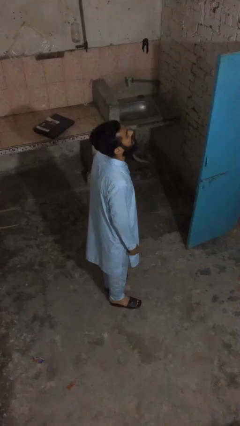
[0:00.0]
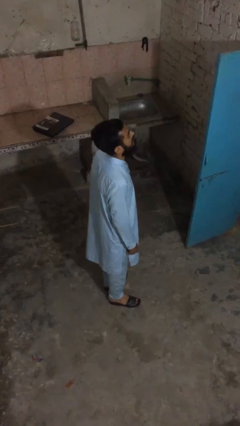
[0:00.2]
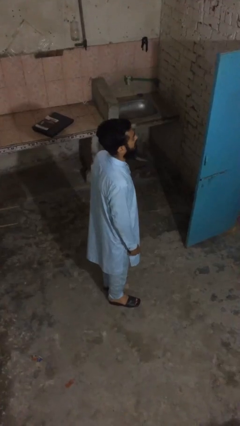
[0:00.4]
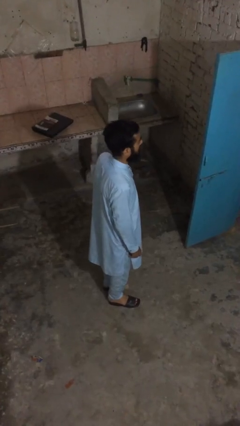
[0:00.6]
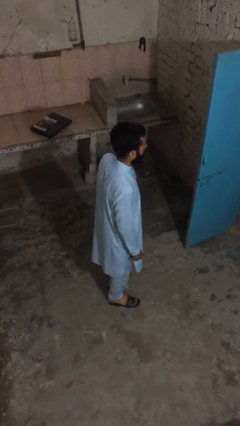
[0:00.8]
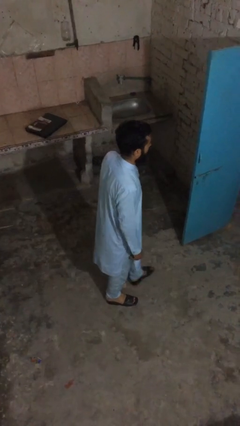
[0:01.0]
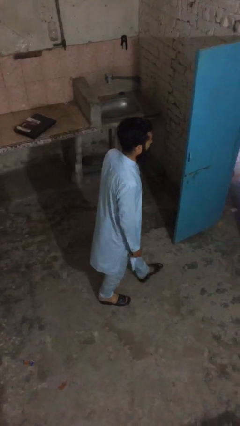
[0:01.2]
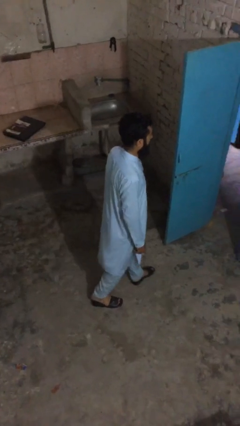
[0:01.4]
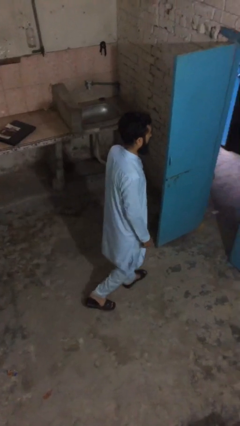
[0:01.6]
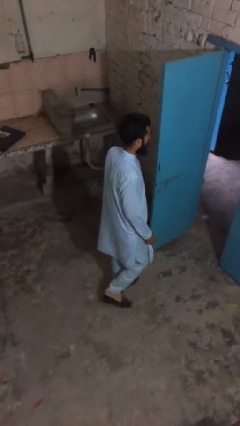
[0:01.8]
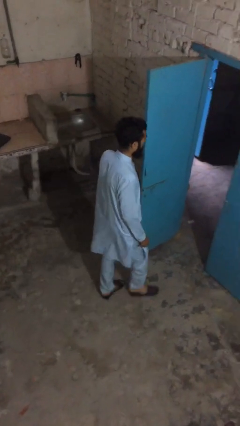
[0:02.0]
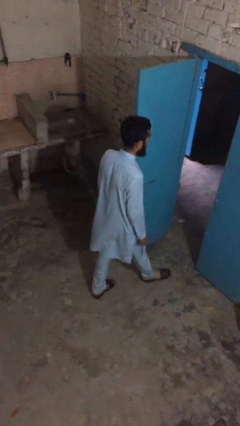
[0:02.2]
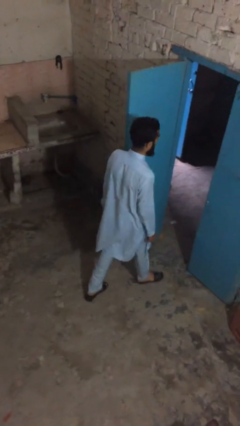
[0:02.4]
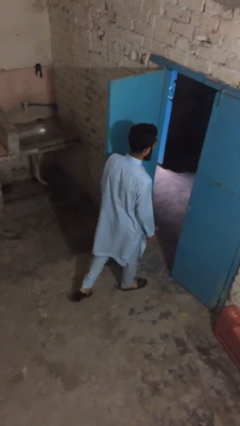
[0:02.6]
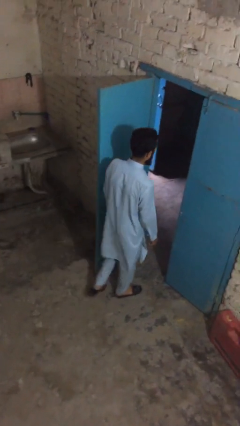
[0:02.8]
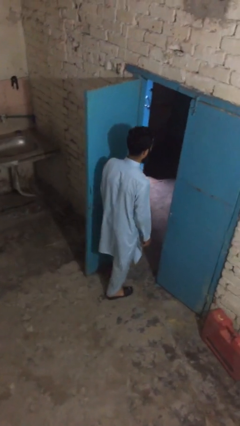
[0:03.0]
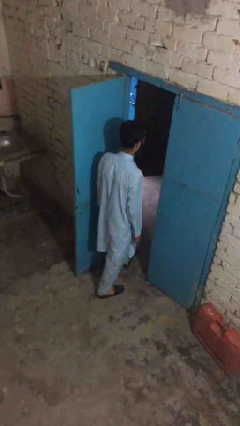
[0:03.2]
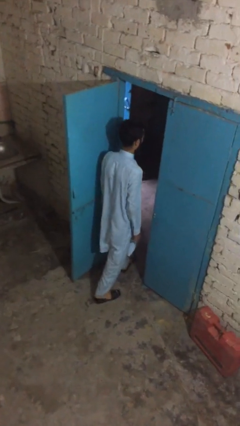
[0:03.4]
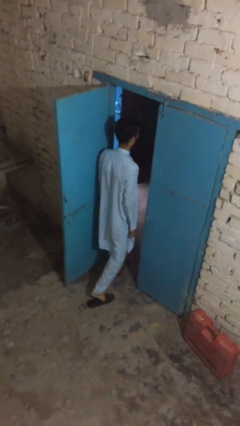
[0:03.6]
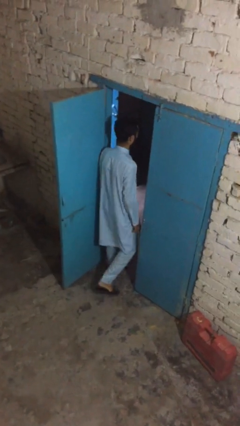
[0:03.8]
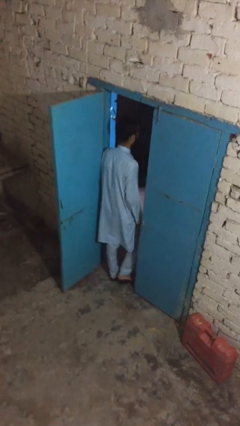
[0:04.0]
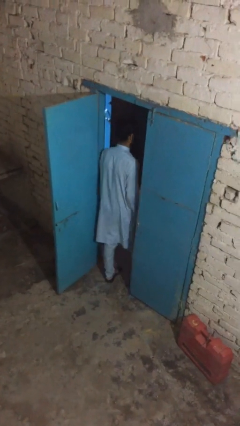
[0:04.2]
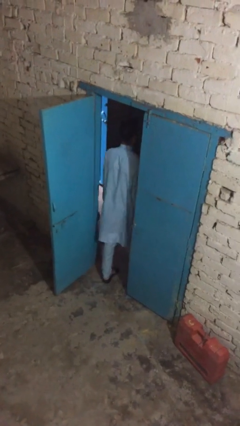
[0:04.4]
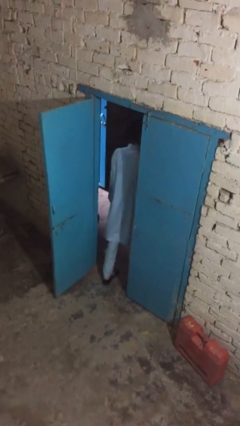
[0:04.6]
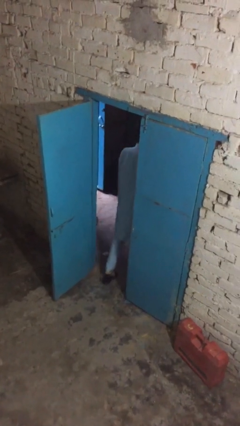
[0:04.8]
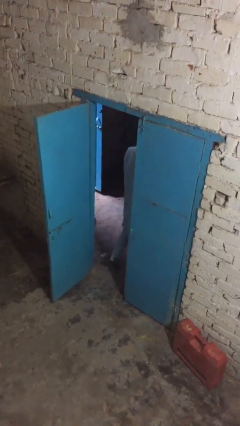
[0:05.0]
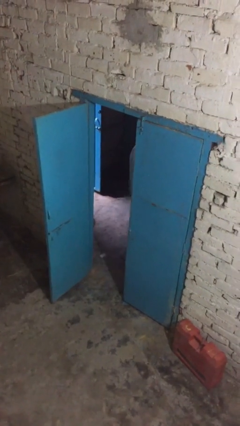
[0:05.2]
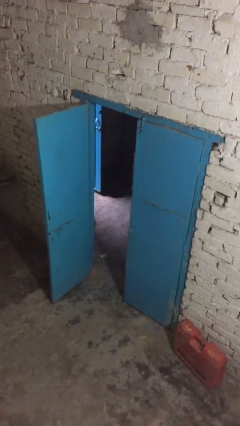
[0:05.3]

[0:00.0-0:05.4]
person exits scene through structure

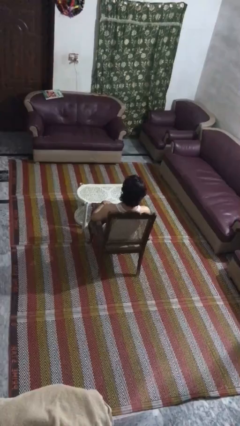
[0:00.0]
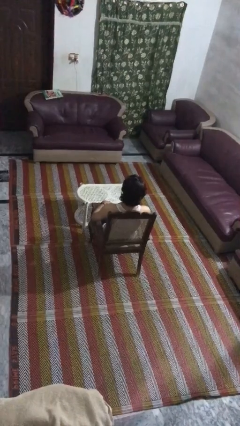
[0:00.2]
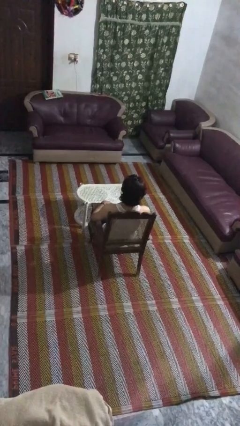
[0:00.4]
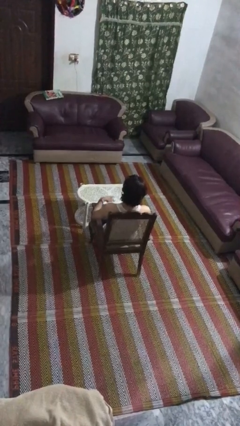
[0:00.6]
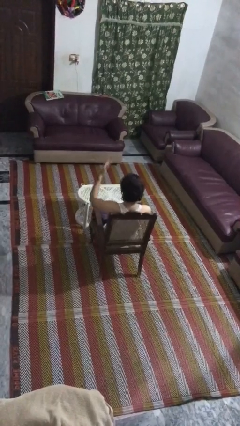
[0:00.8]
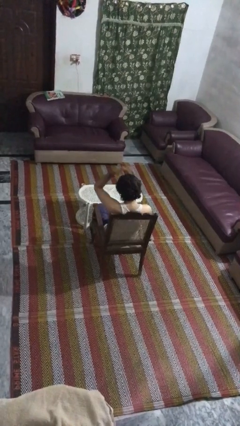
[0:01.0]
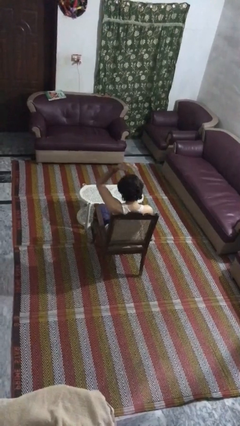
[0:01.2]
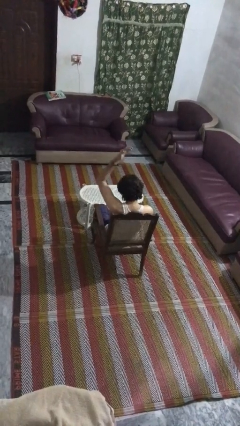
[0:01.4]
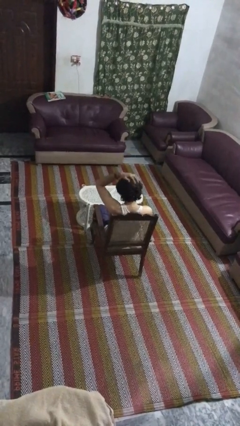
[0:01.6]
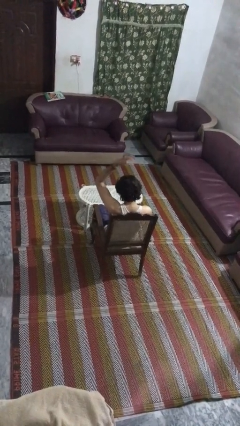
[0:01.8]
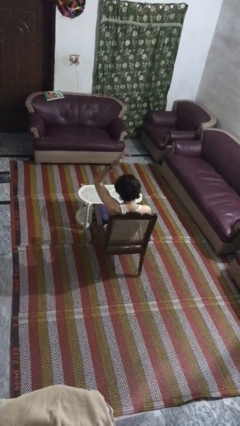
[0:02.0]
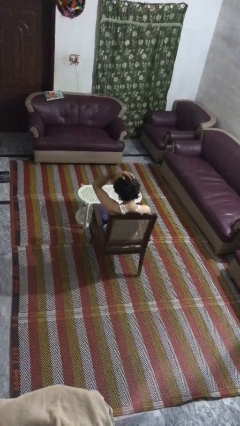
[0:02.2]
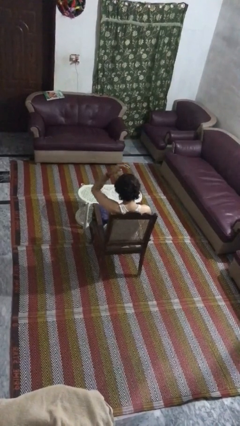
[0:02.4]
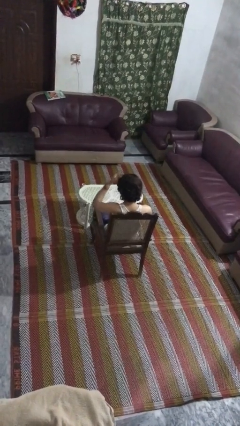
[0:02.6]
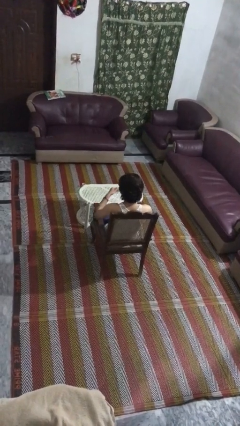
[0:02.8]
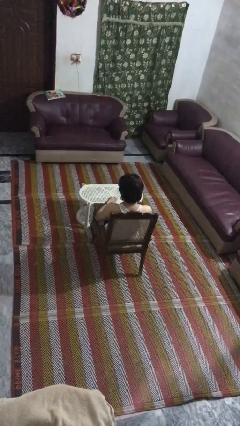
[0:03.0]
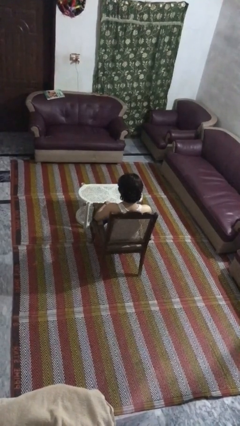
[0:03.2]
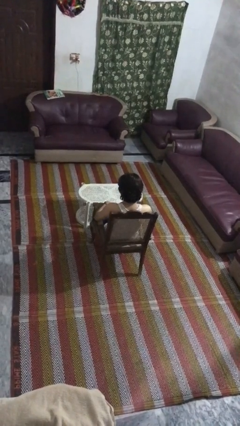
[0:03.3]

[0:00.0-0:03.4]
person pats head

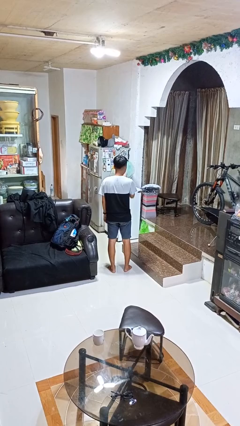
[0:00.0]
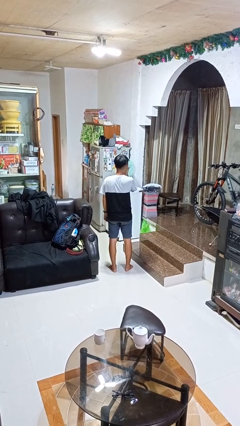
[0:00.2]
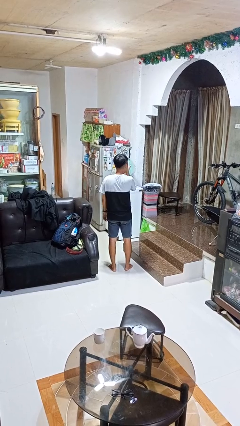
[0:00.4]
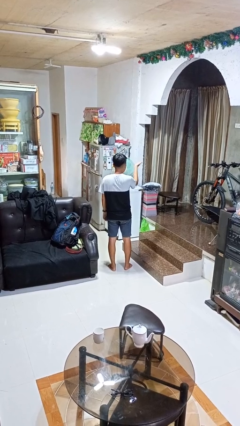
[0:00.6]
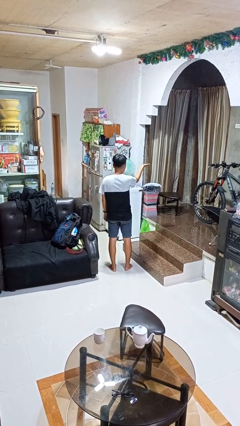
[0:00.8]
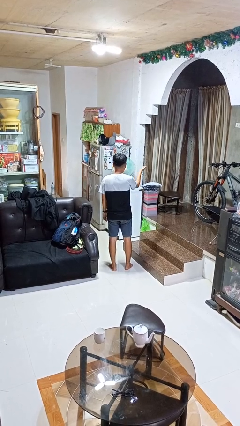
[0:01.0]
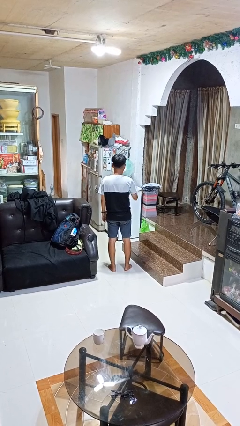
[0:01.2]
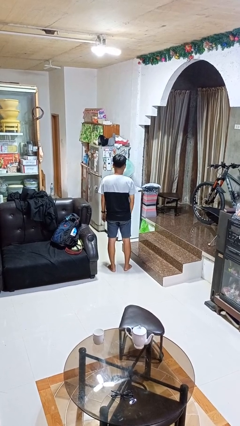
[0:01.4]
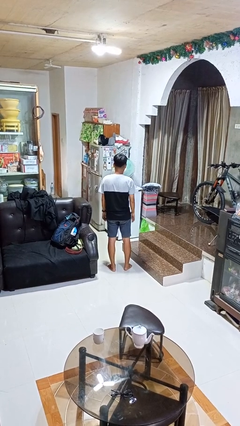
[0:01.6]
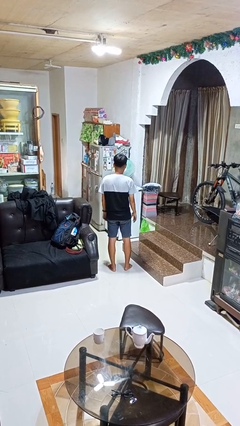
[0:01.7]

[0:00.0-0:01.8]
person gestures blow kiss

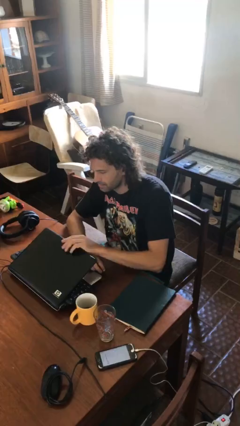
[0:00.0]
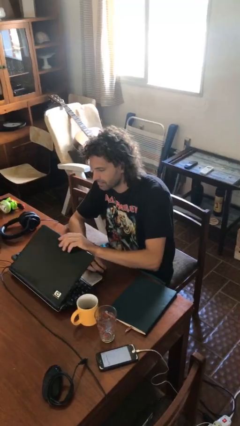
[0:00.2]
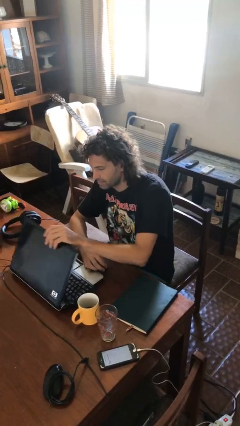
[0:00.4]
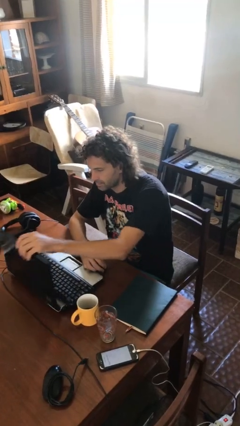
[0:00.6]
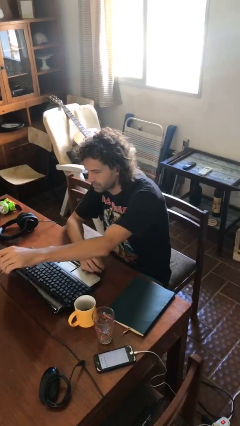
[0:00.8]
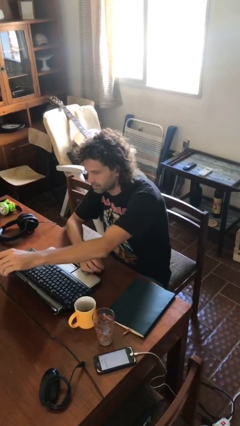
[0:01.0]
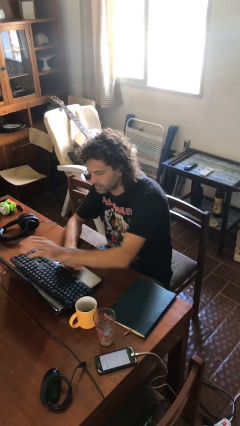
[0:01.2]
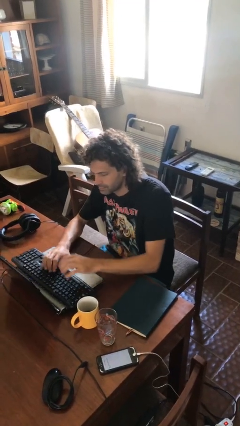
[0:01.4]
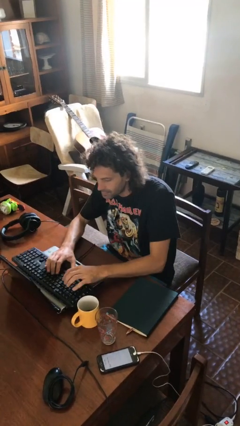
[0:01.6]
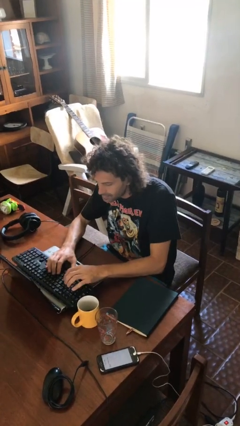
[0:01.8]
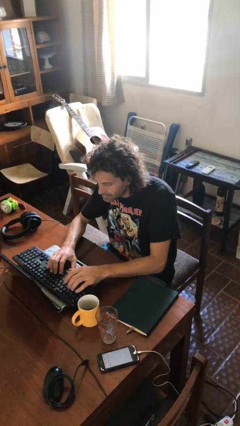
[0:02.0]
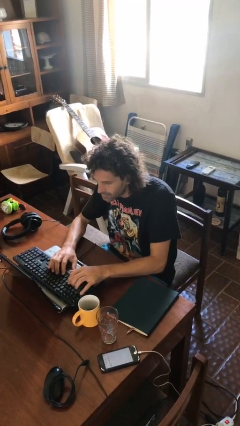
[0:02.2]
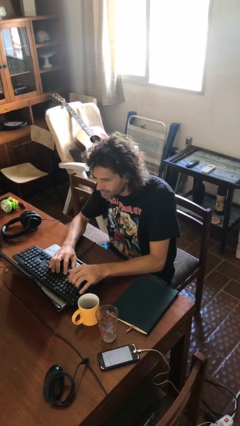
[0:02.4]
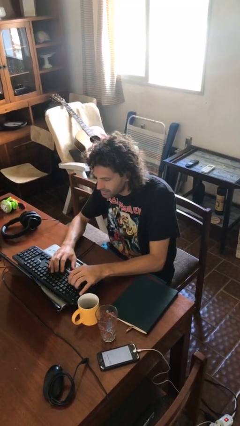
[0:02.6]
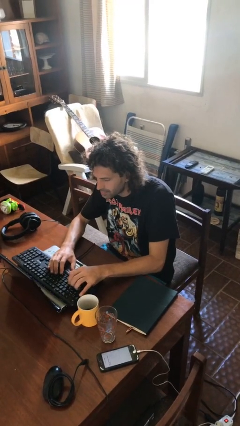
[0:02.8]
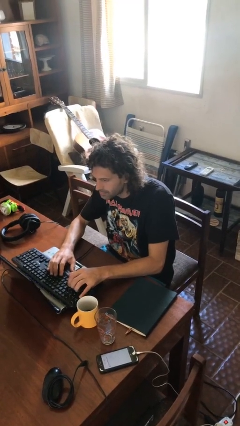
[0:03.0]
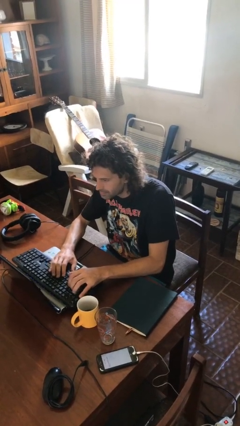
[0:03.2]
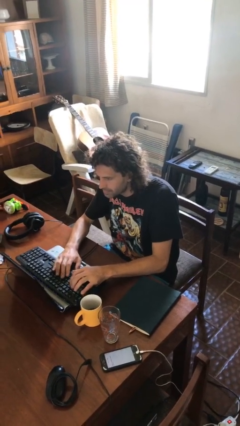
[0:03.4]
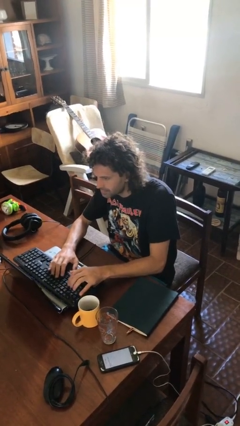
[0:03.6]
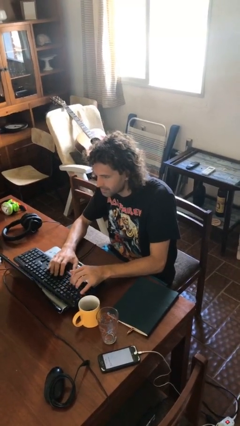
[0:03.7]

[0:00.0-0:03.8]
person interacts with laptop

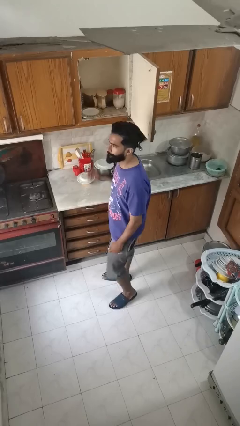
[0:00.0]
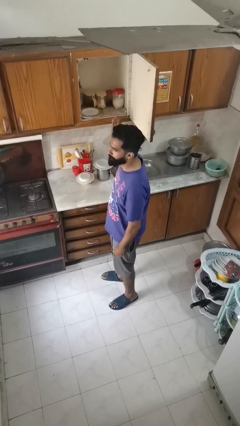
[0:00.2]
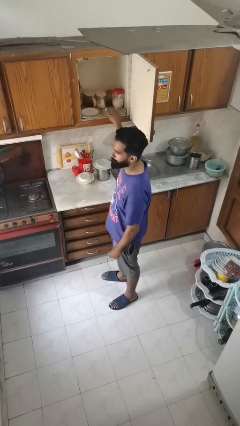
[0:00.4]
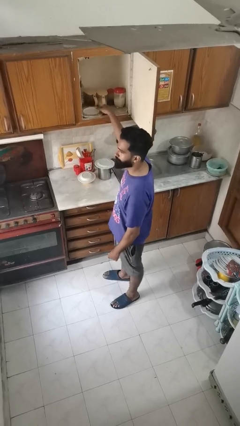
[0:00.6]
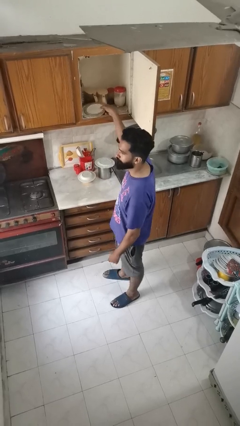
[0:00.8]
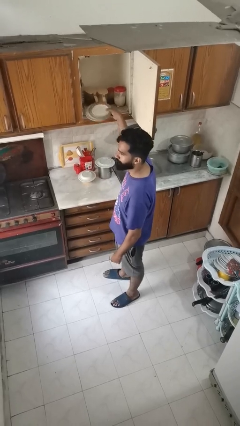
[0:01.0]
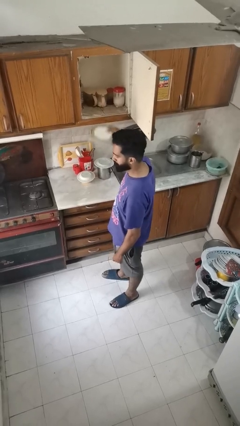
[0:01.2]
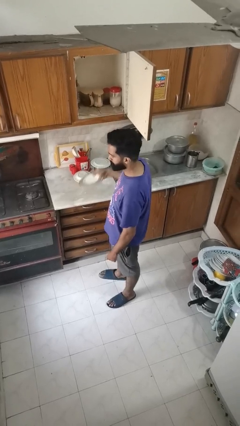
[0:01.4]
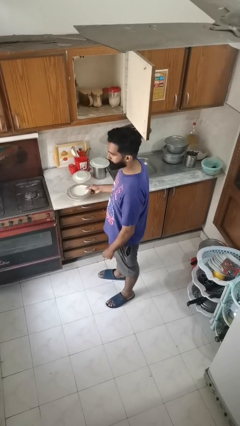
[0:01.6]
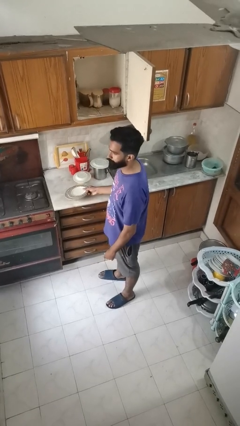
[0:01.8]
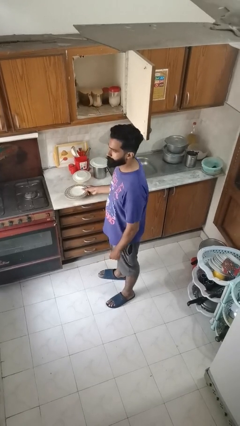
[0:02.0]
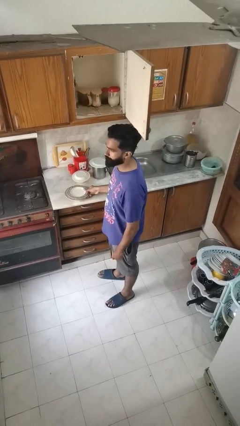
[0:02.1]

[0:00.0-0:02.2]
person takes object from cabinet

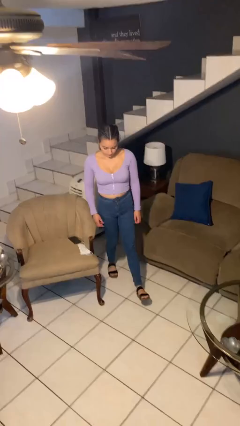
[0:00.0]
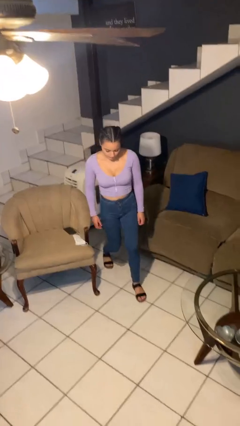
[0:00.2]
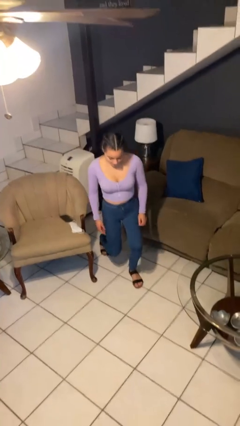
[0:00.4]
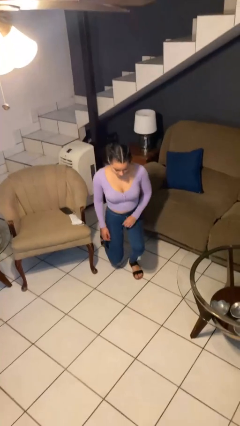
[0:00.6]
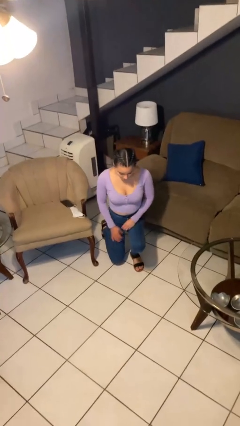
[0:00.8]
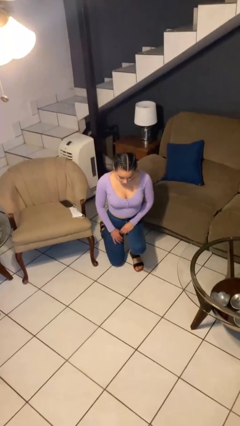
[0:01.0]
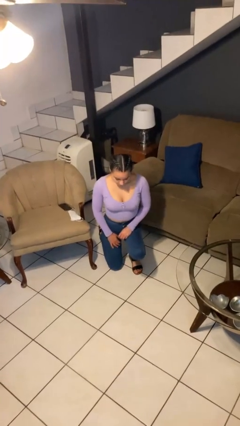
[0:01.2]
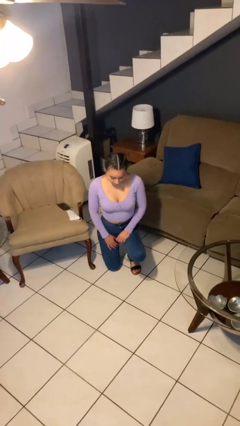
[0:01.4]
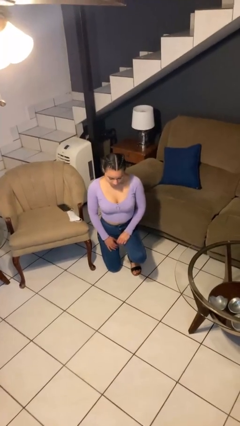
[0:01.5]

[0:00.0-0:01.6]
person kneels
